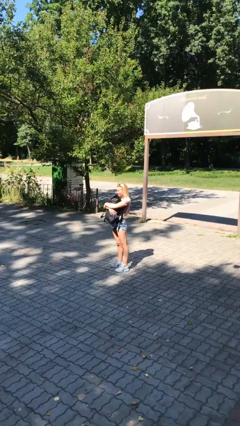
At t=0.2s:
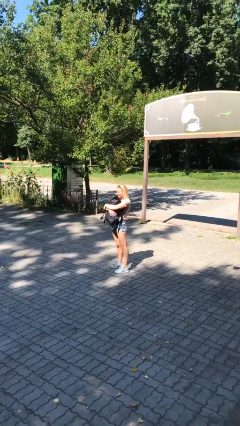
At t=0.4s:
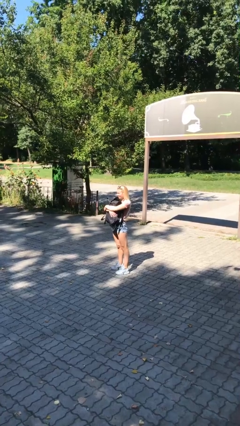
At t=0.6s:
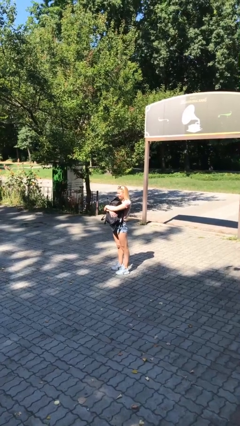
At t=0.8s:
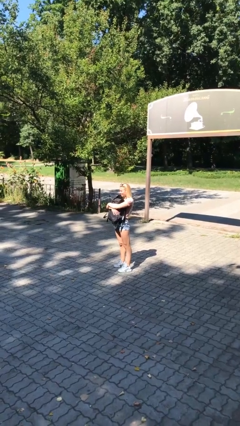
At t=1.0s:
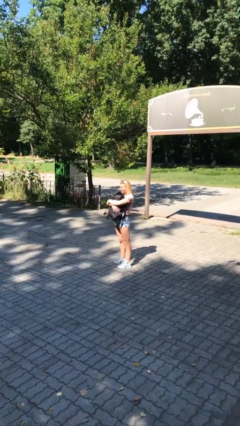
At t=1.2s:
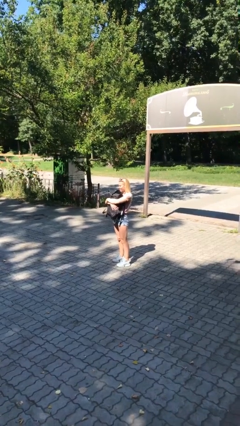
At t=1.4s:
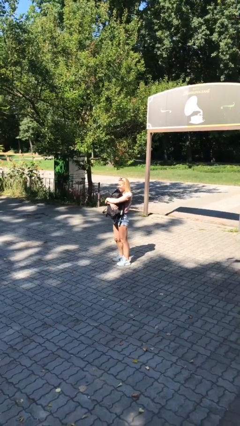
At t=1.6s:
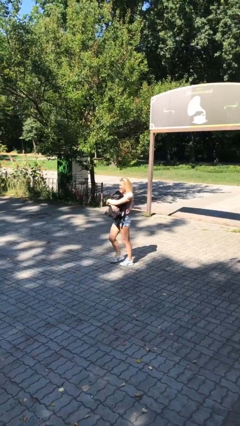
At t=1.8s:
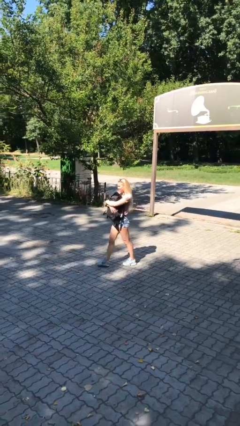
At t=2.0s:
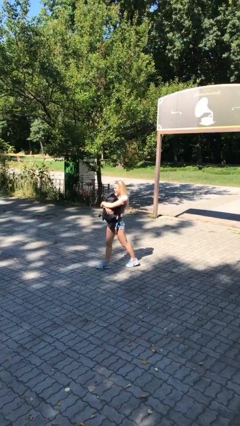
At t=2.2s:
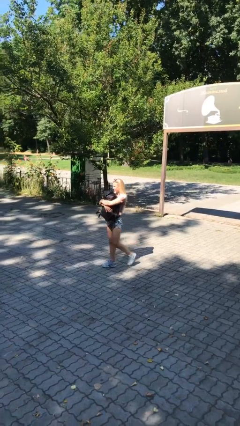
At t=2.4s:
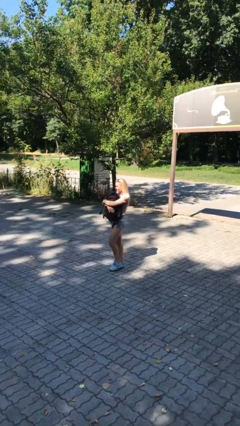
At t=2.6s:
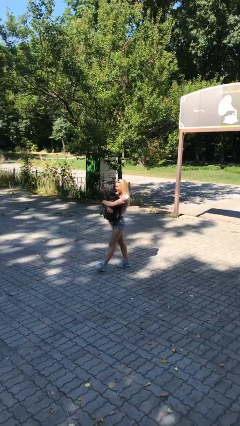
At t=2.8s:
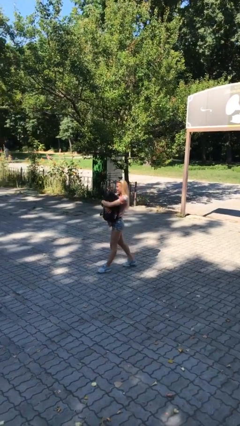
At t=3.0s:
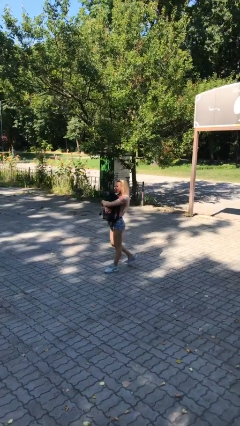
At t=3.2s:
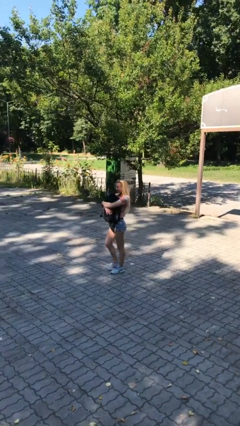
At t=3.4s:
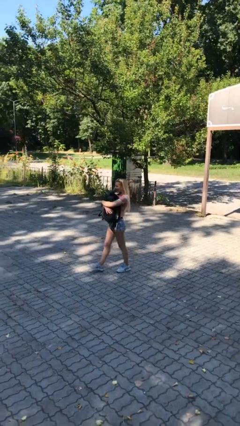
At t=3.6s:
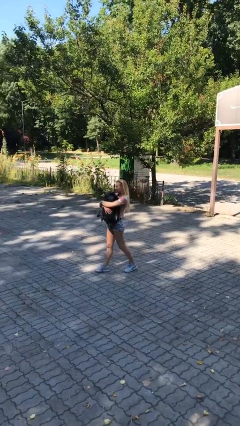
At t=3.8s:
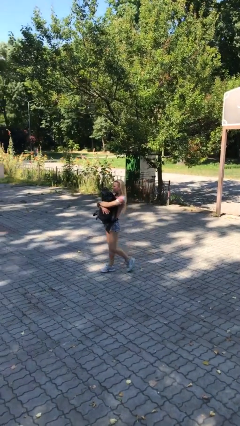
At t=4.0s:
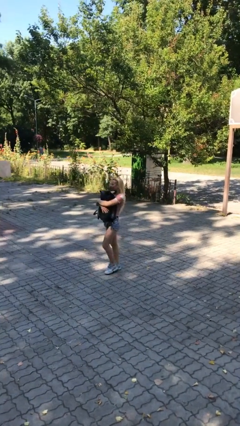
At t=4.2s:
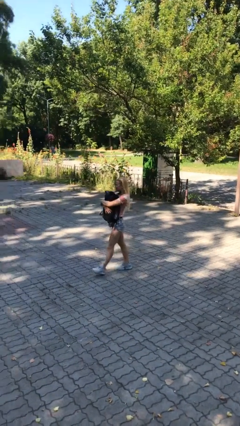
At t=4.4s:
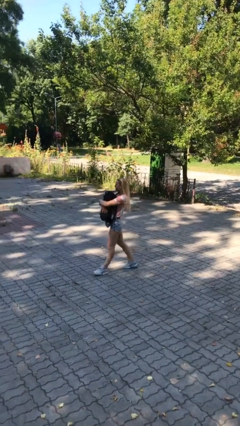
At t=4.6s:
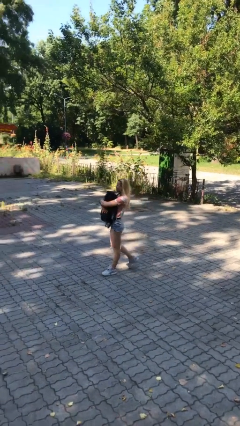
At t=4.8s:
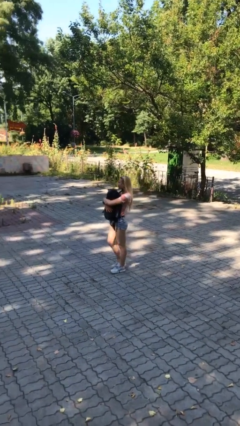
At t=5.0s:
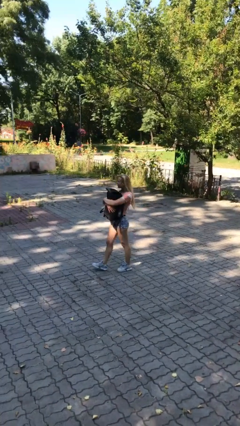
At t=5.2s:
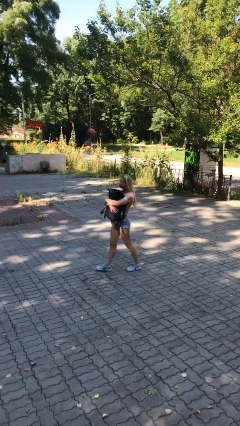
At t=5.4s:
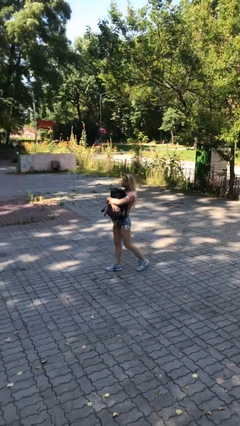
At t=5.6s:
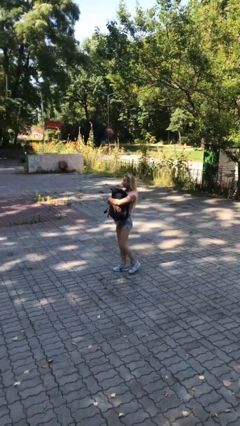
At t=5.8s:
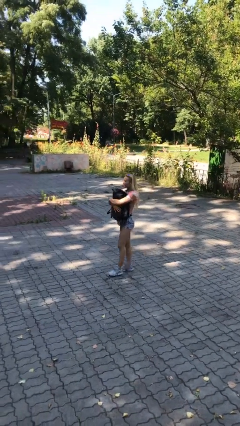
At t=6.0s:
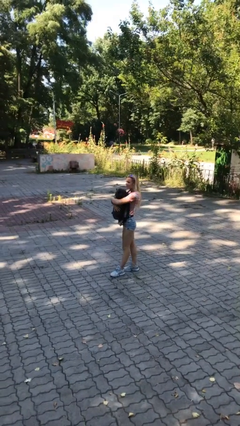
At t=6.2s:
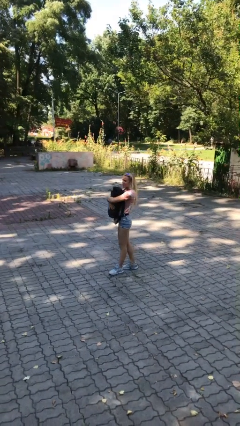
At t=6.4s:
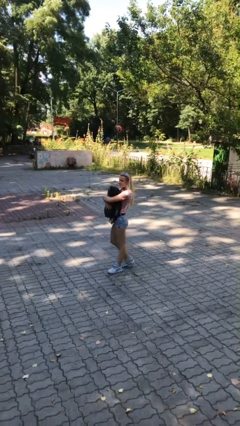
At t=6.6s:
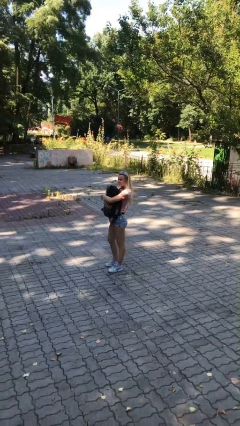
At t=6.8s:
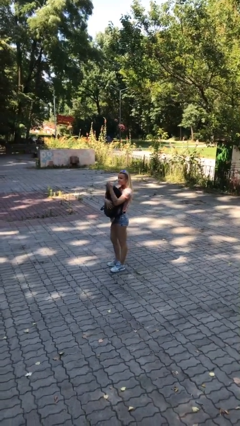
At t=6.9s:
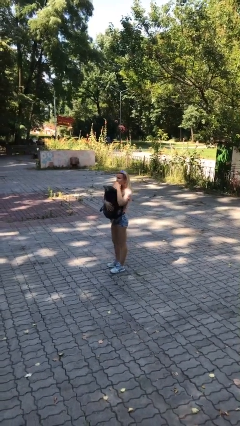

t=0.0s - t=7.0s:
person carries heavy object

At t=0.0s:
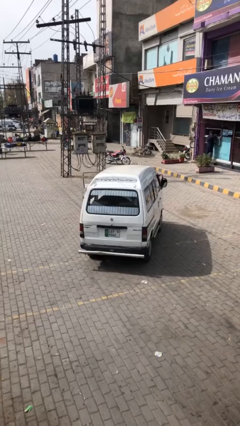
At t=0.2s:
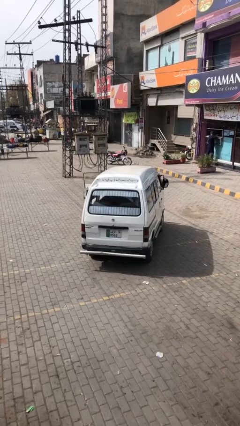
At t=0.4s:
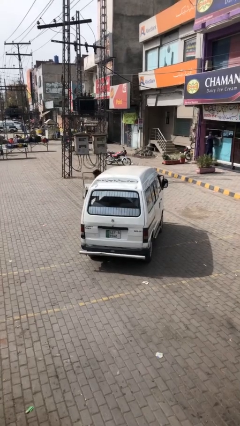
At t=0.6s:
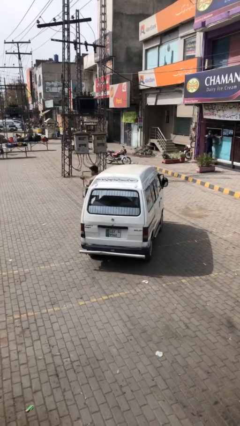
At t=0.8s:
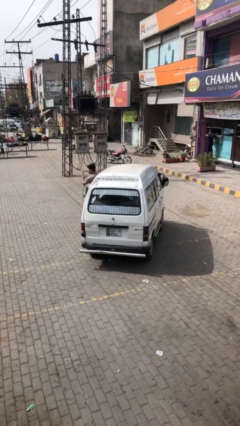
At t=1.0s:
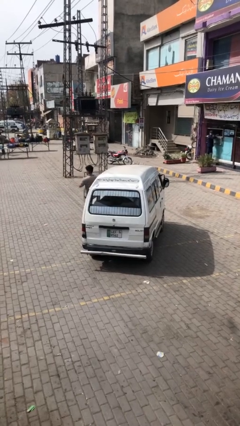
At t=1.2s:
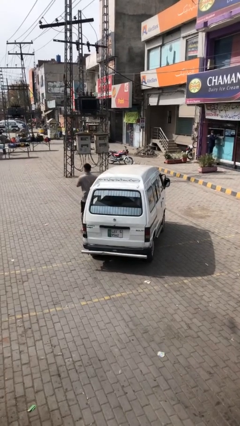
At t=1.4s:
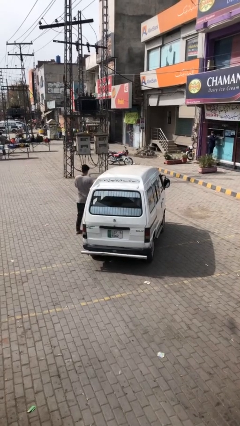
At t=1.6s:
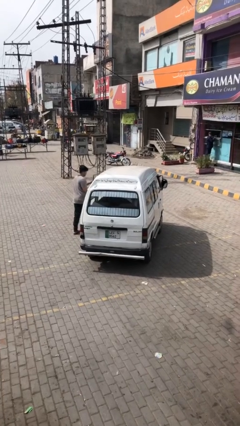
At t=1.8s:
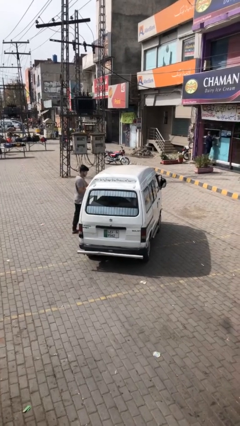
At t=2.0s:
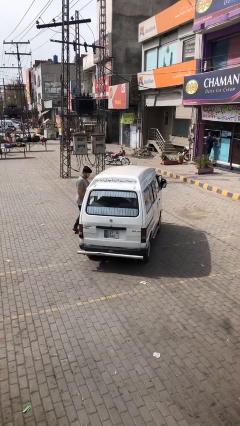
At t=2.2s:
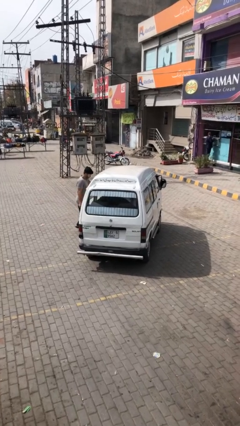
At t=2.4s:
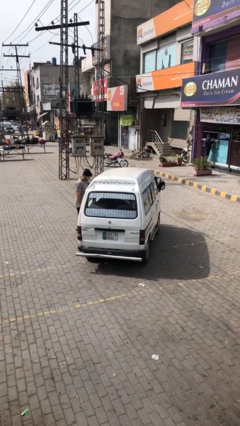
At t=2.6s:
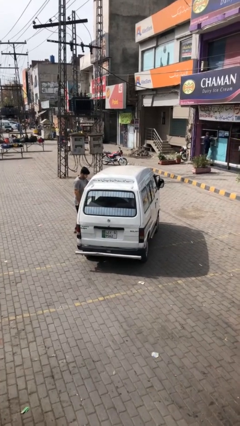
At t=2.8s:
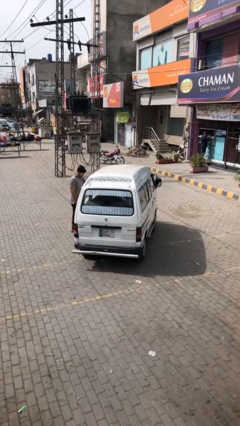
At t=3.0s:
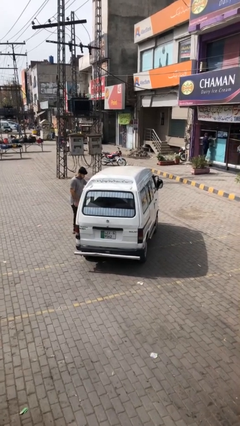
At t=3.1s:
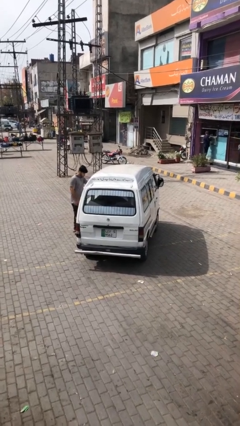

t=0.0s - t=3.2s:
car drops off person

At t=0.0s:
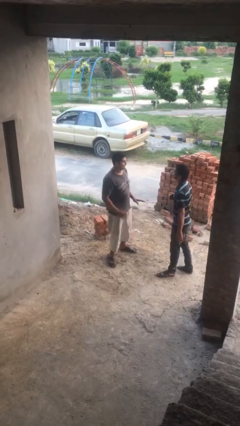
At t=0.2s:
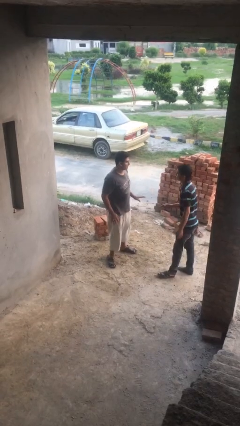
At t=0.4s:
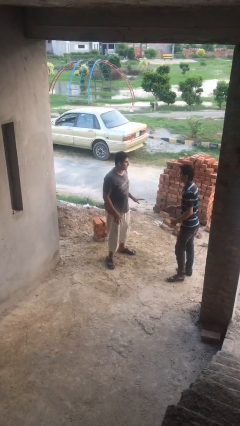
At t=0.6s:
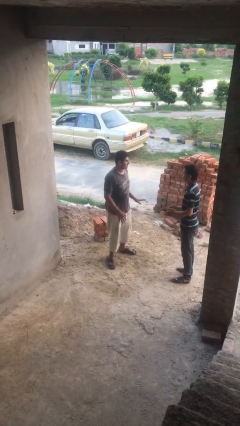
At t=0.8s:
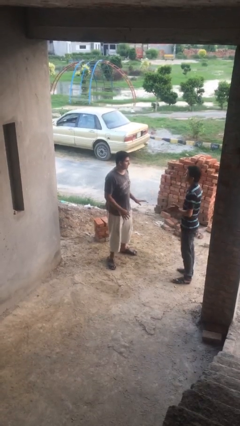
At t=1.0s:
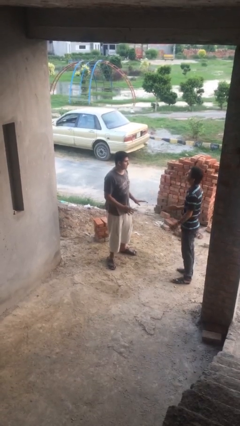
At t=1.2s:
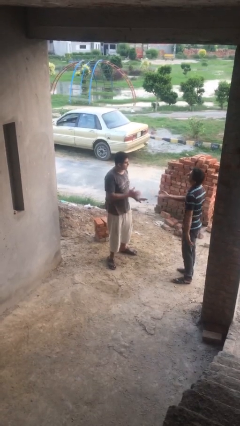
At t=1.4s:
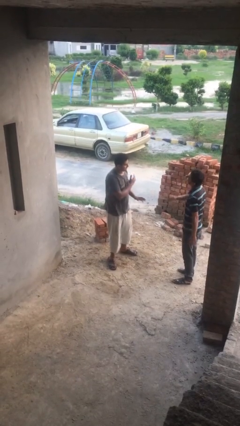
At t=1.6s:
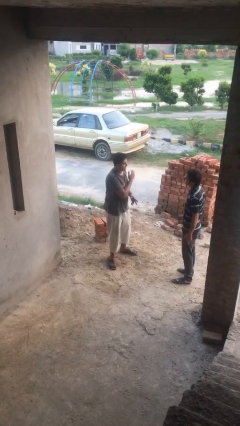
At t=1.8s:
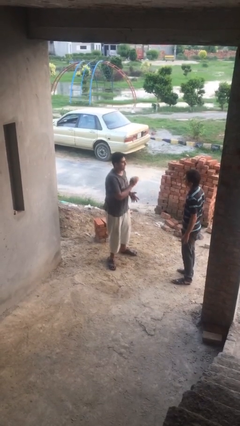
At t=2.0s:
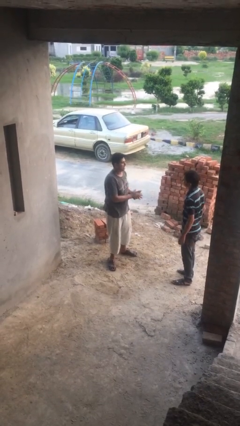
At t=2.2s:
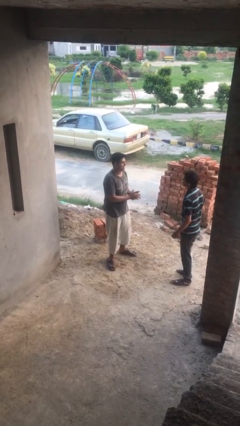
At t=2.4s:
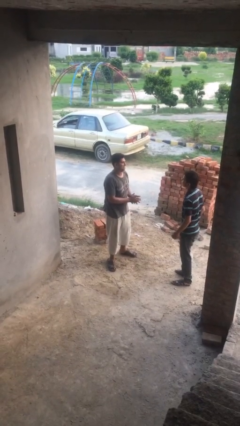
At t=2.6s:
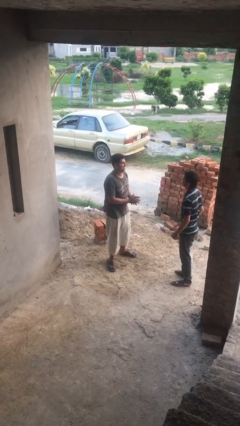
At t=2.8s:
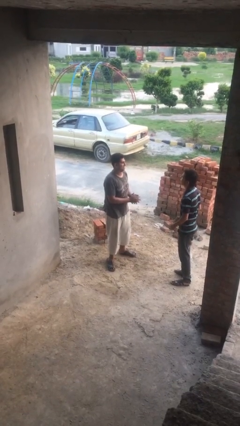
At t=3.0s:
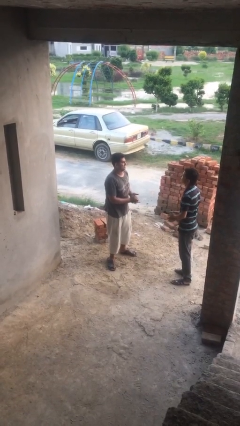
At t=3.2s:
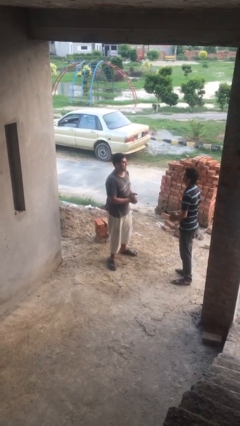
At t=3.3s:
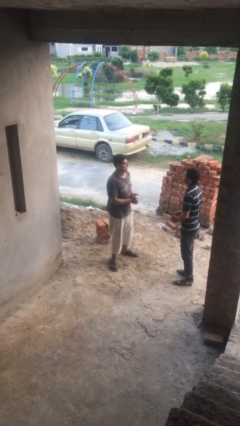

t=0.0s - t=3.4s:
person talks to person

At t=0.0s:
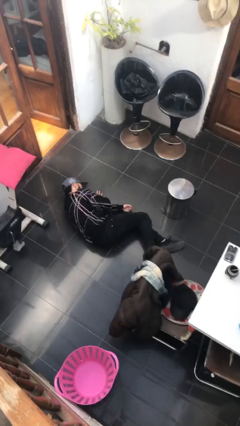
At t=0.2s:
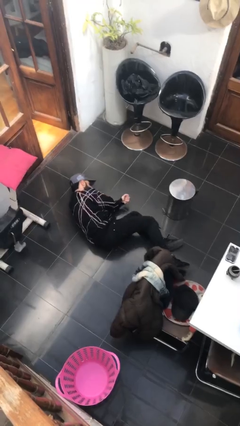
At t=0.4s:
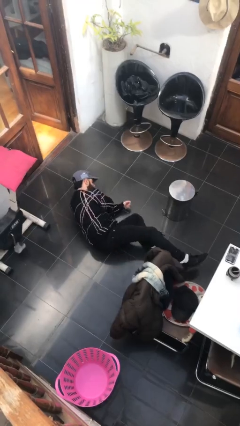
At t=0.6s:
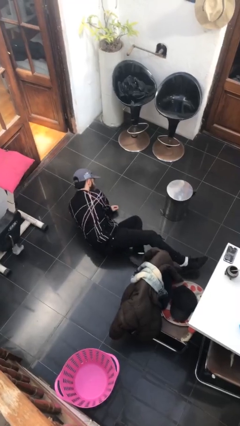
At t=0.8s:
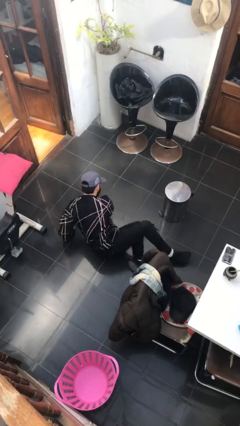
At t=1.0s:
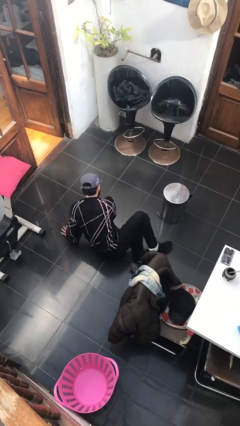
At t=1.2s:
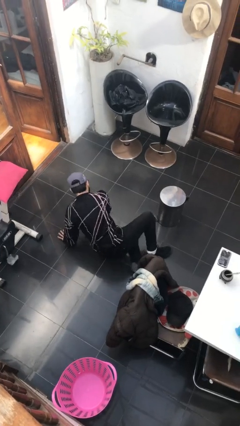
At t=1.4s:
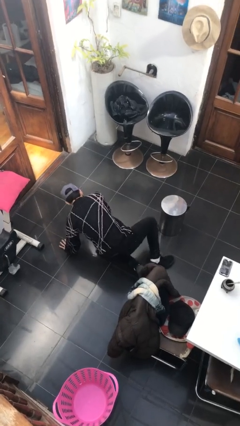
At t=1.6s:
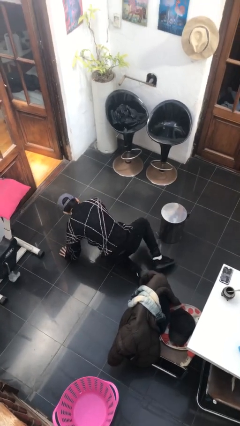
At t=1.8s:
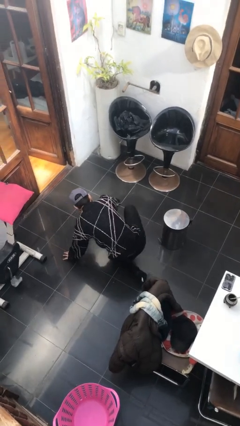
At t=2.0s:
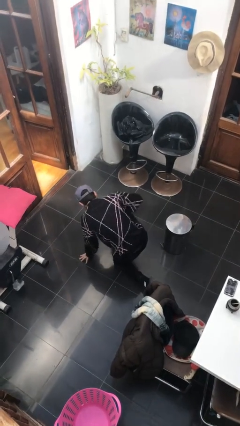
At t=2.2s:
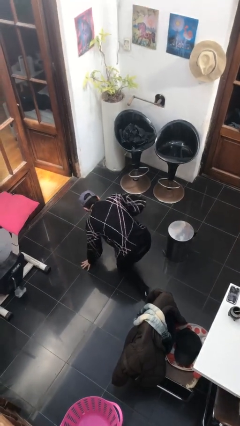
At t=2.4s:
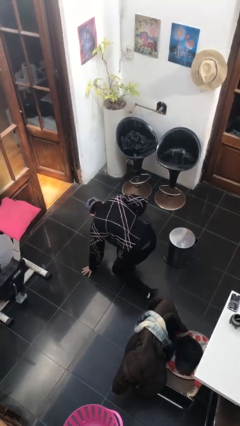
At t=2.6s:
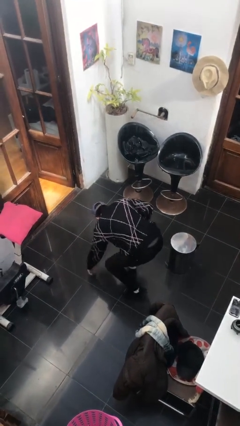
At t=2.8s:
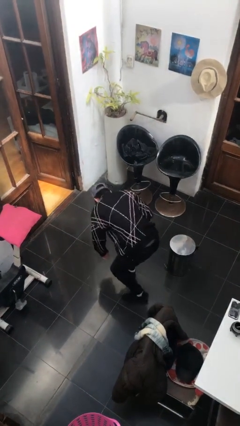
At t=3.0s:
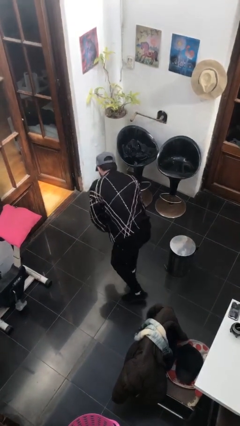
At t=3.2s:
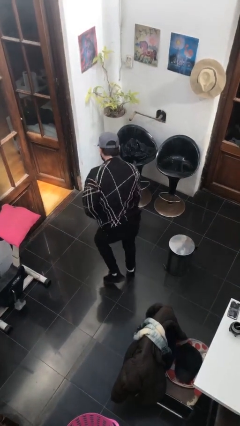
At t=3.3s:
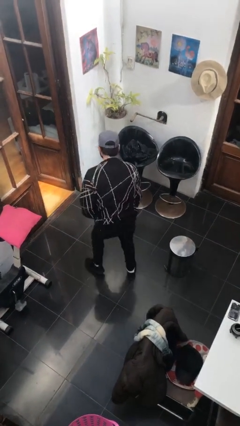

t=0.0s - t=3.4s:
person stands up from floor

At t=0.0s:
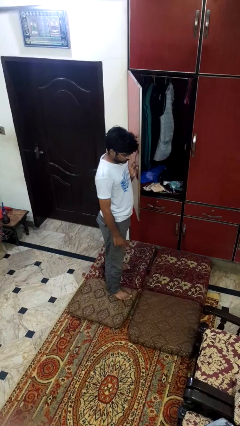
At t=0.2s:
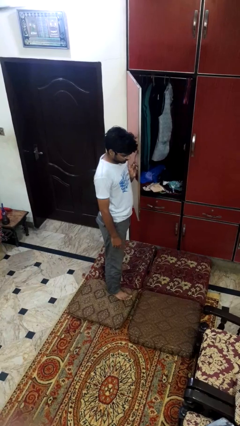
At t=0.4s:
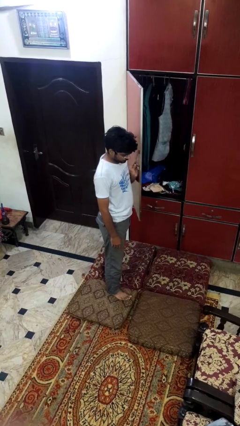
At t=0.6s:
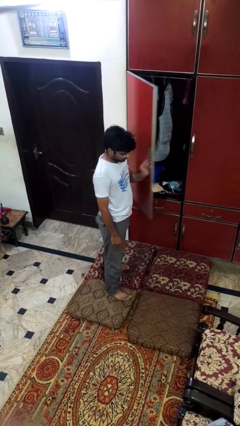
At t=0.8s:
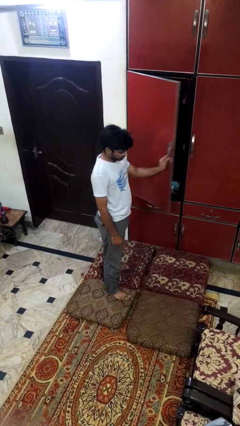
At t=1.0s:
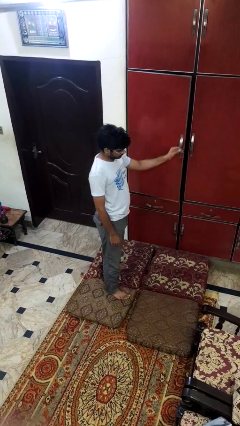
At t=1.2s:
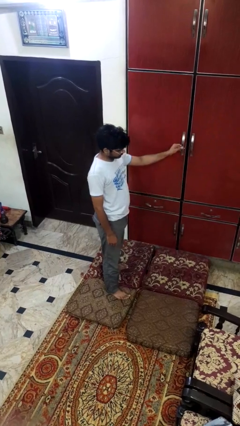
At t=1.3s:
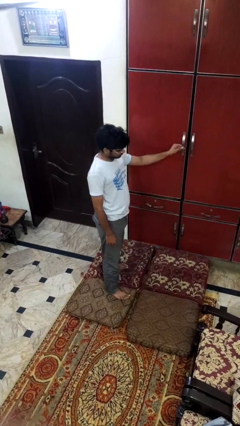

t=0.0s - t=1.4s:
person closes closet door
